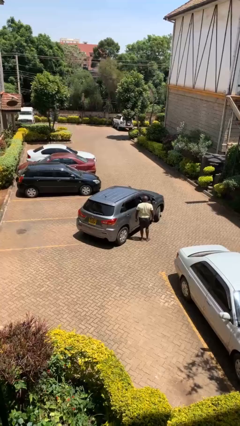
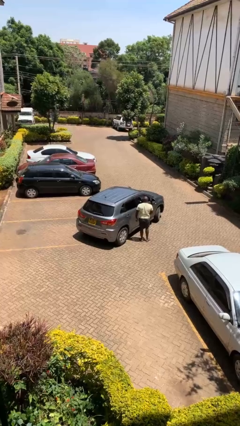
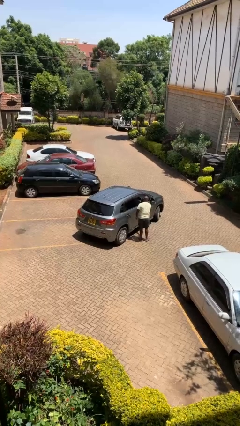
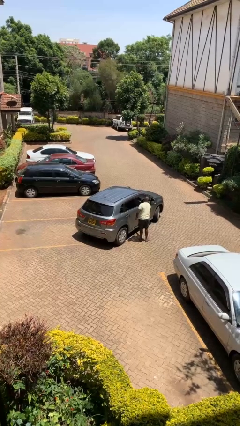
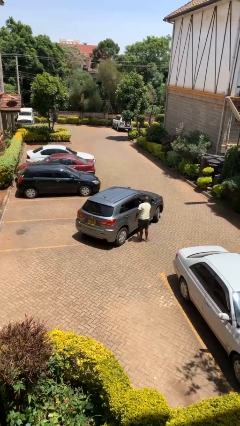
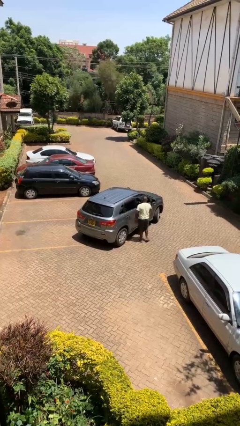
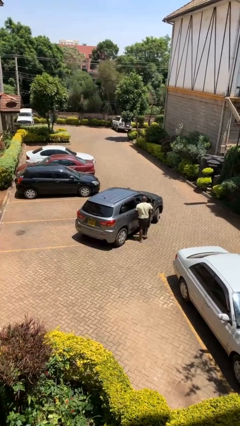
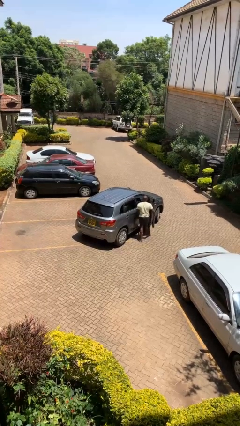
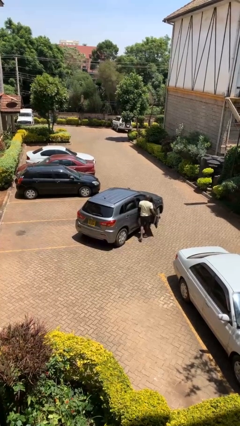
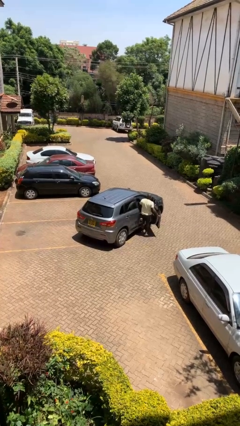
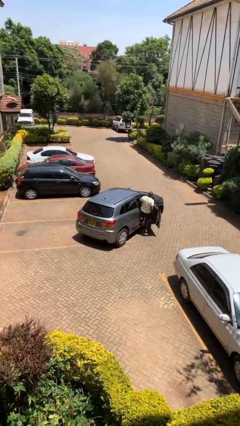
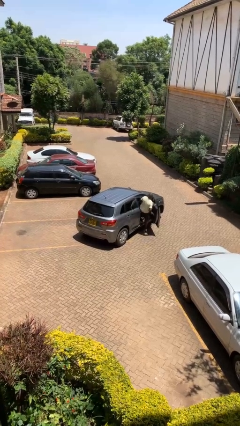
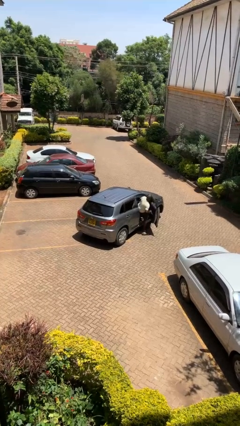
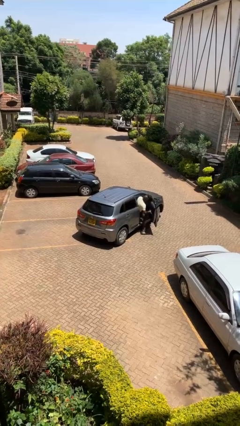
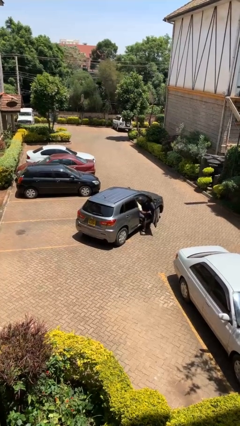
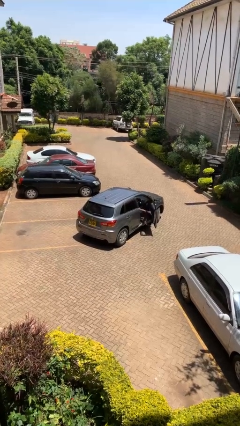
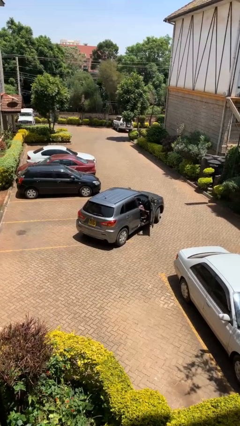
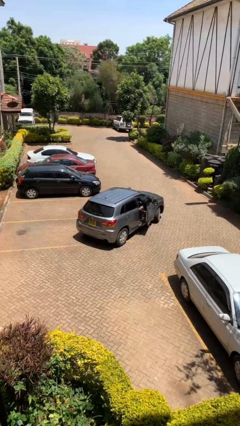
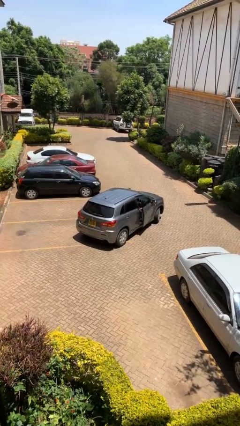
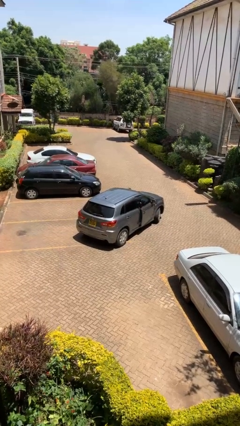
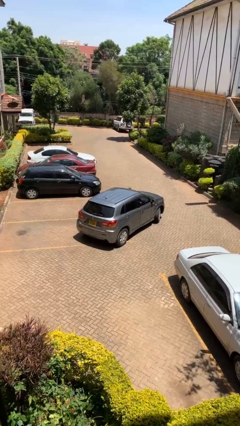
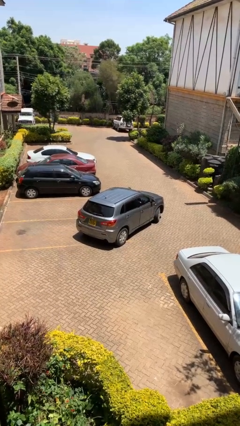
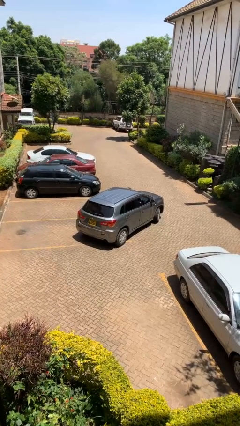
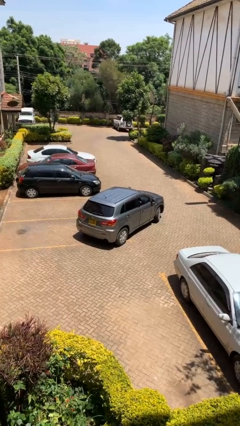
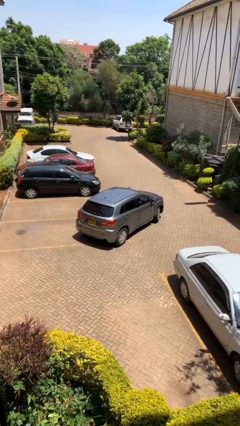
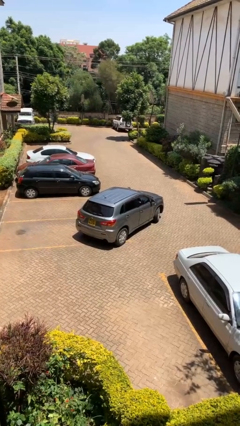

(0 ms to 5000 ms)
car picks up person

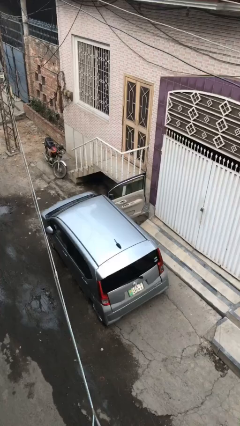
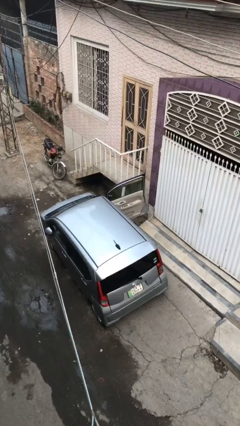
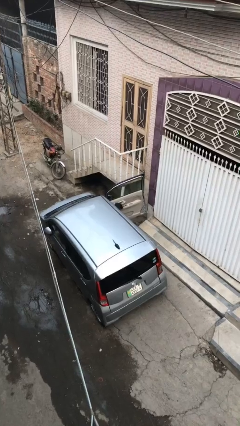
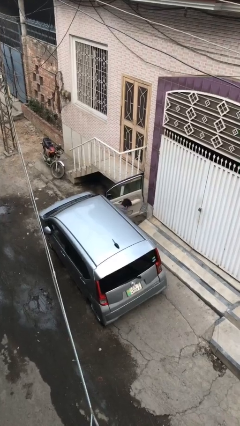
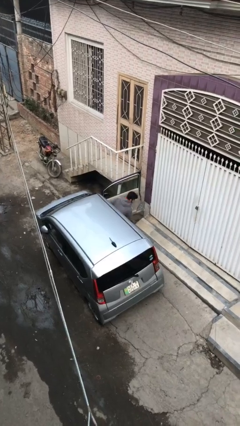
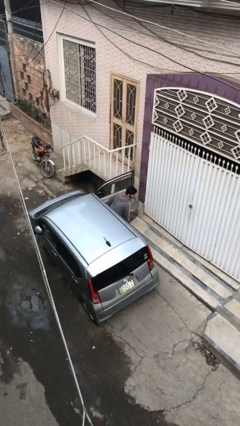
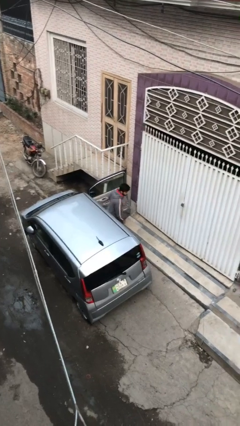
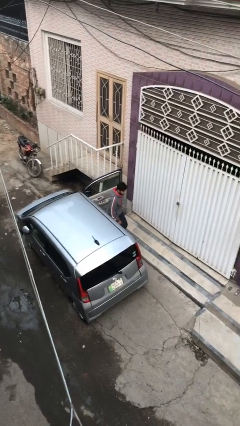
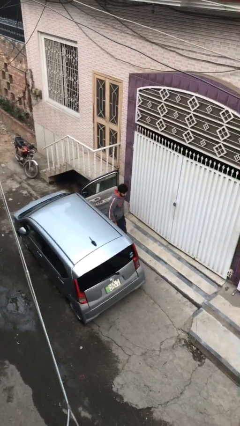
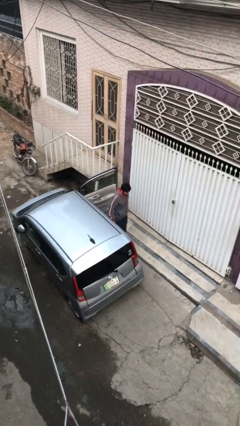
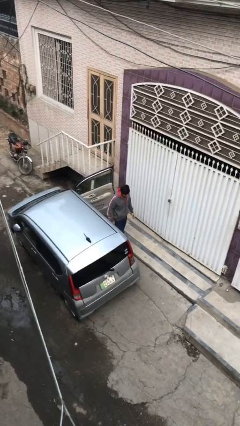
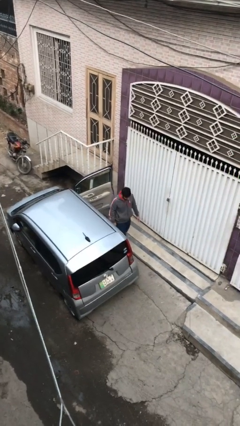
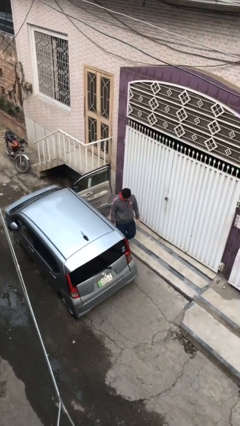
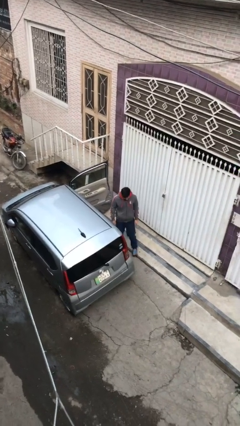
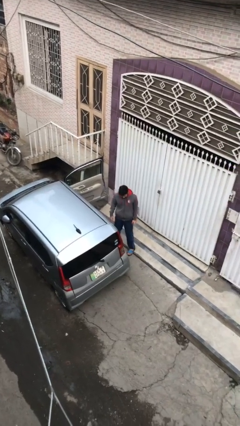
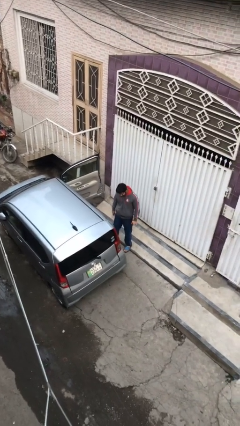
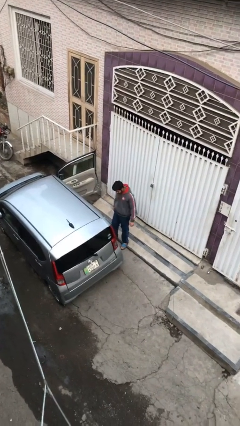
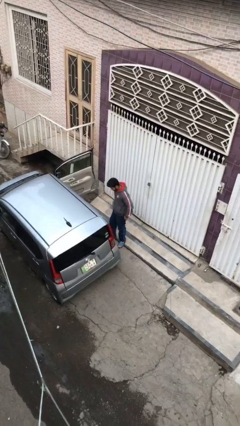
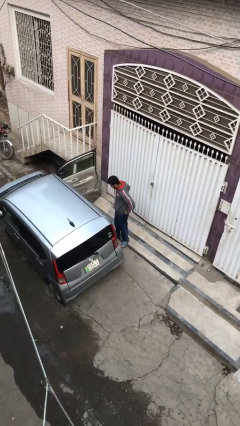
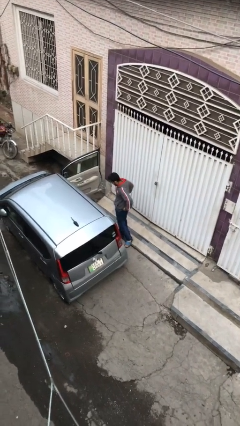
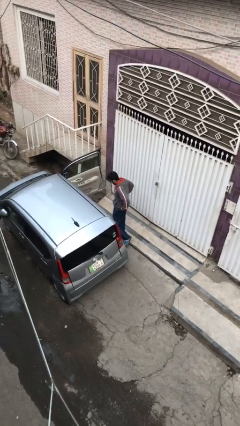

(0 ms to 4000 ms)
person exits car

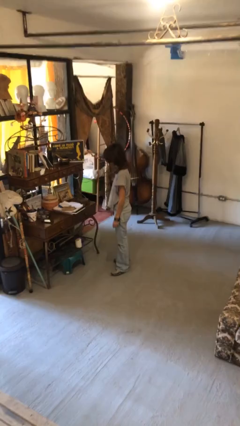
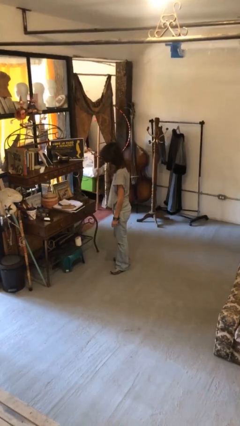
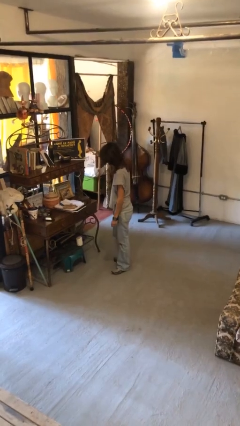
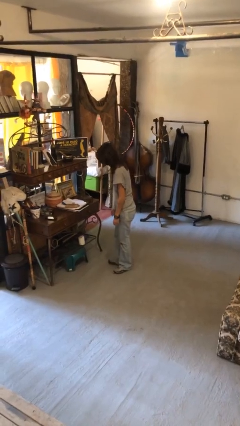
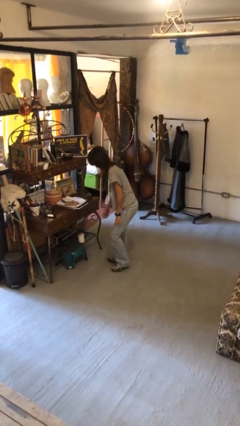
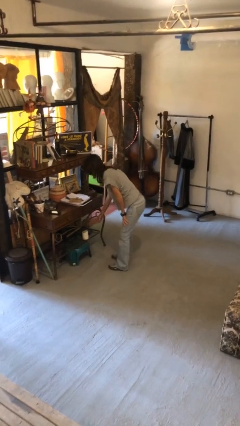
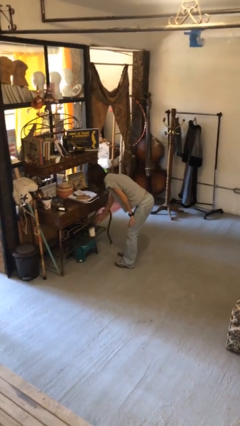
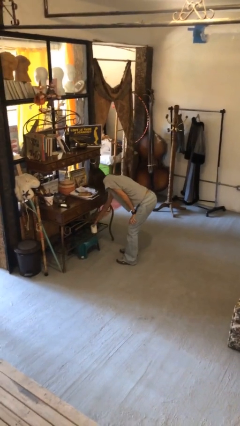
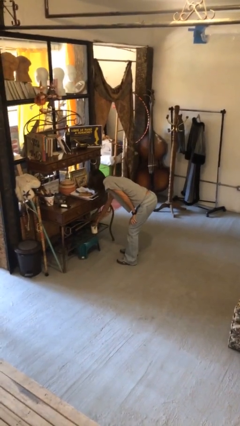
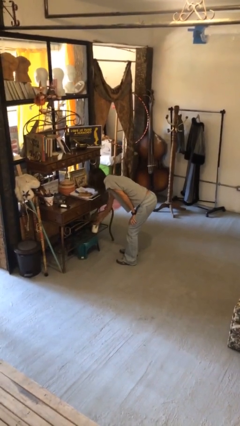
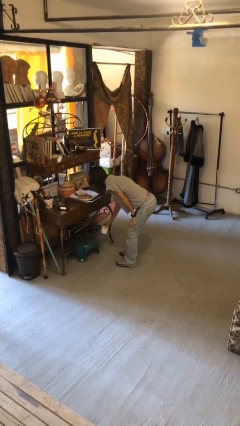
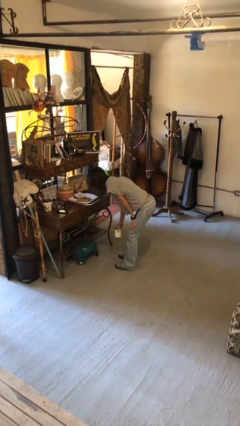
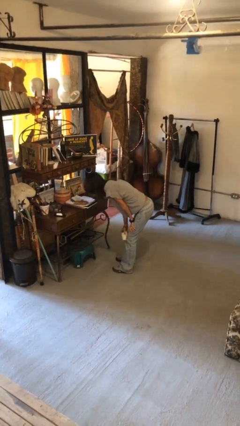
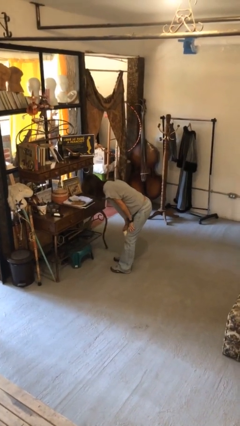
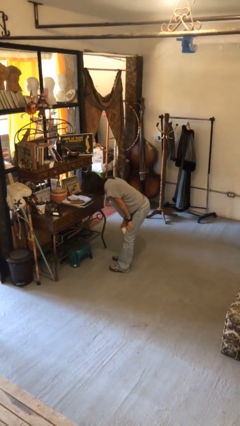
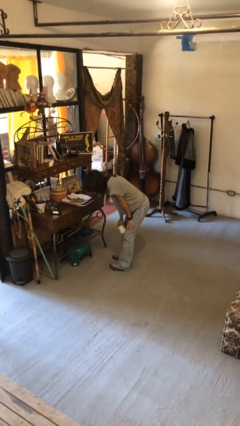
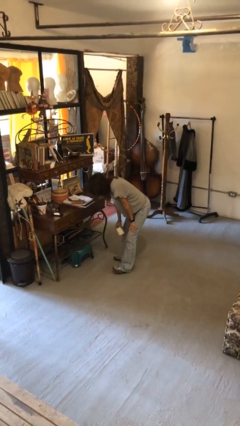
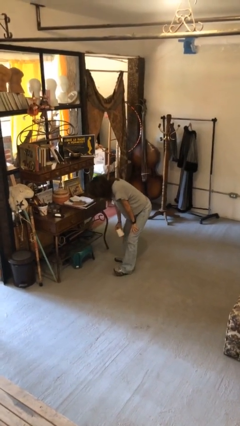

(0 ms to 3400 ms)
person picks up object from cabinet

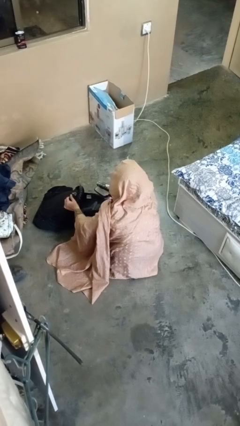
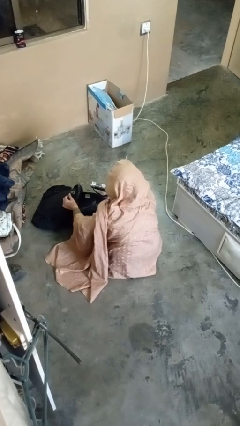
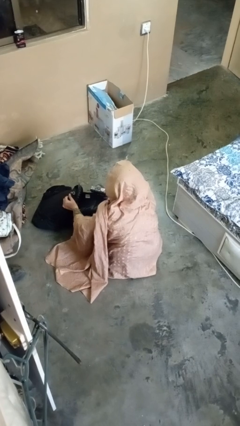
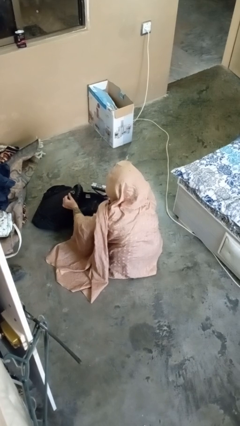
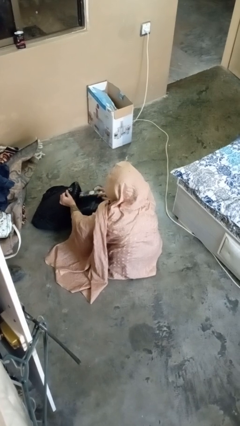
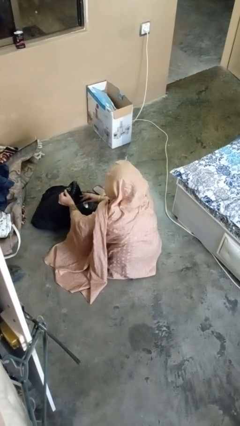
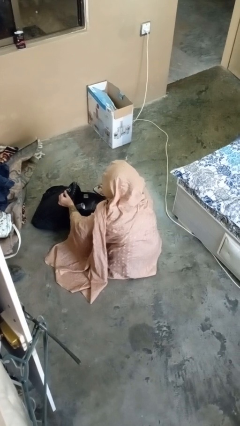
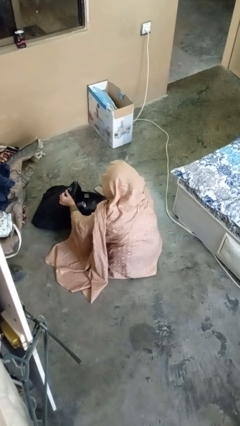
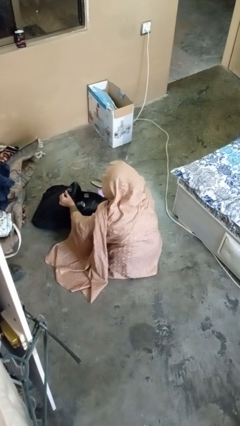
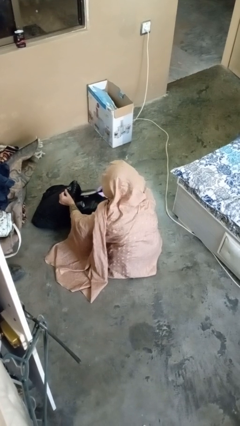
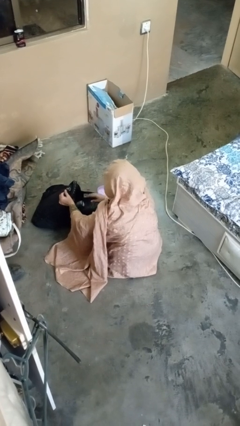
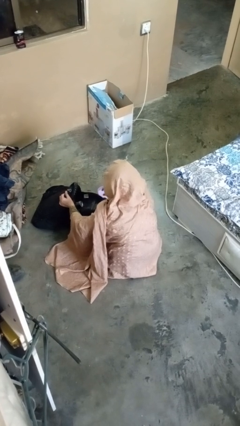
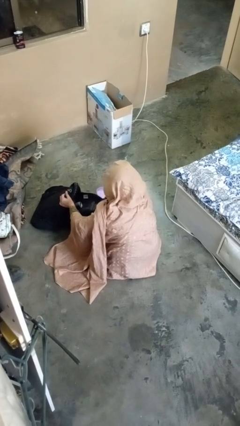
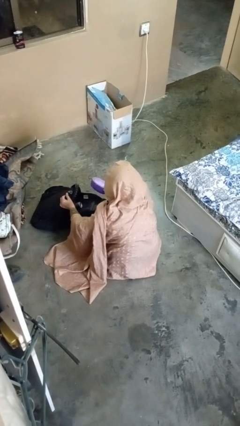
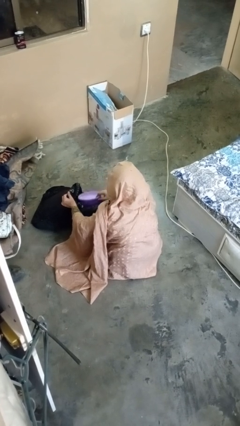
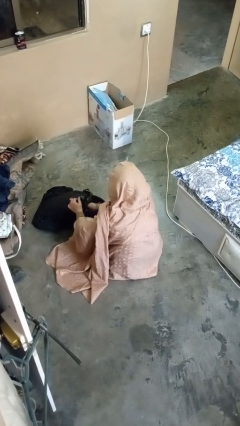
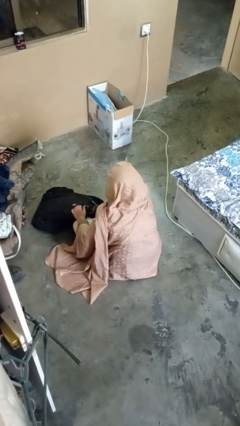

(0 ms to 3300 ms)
person puts object into backpack

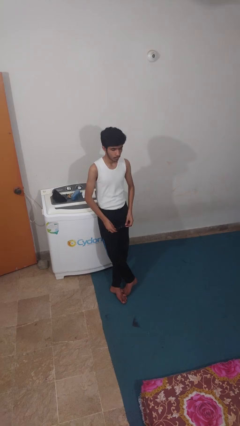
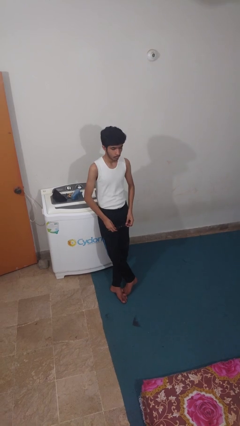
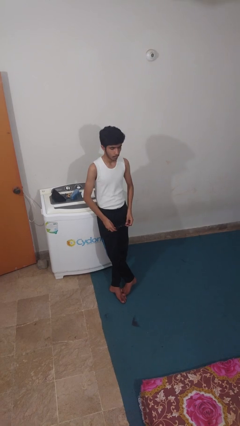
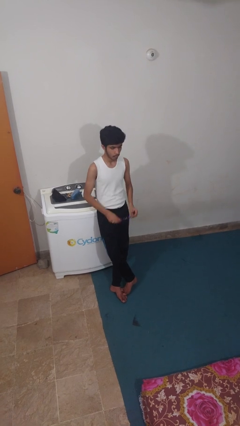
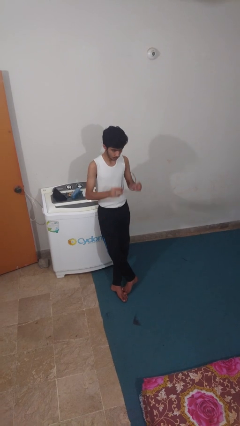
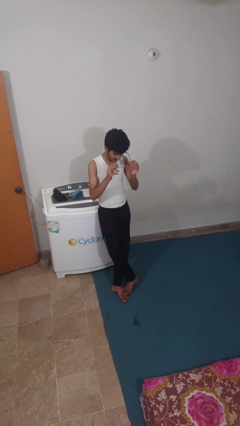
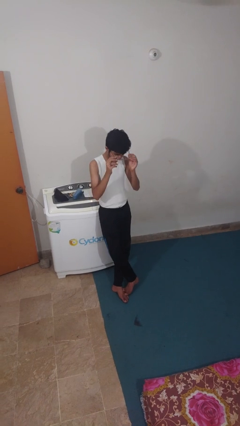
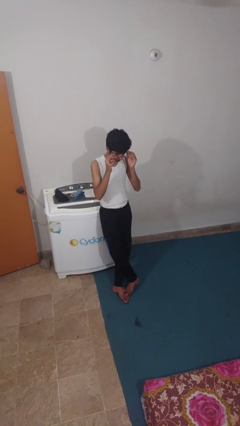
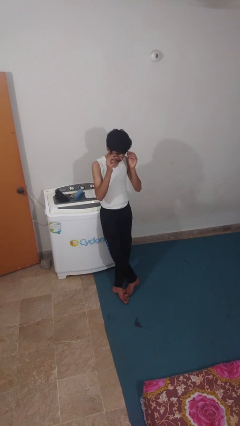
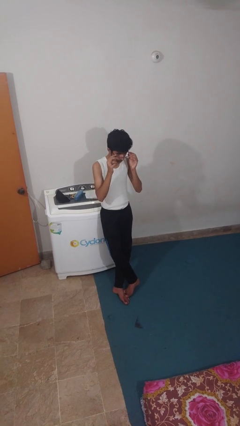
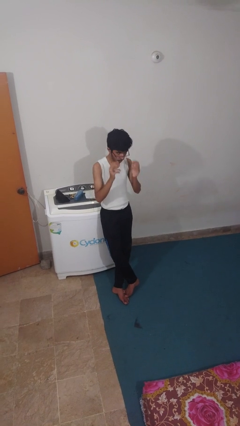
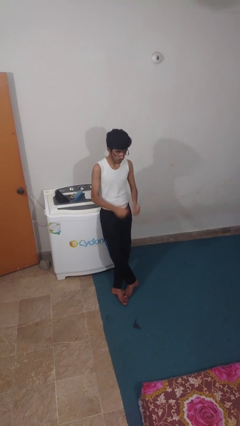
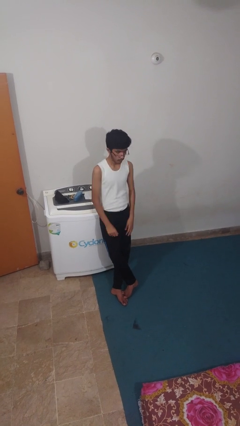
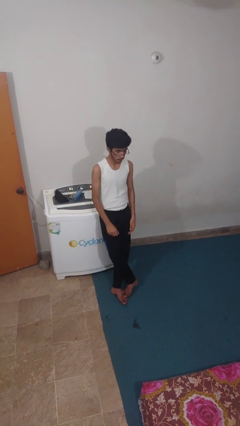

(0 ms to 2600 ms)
person puts on glasses
